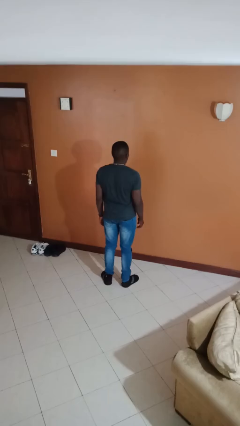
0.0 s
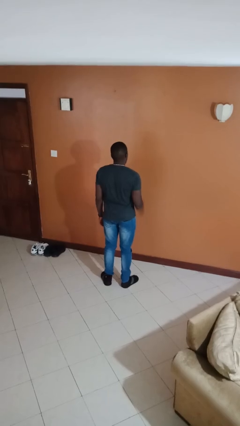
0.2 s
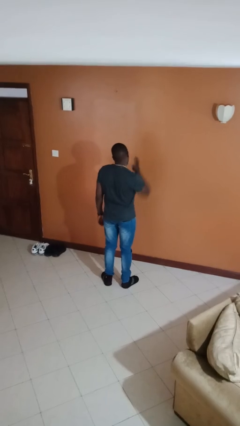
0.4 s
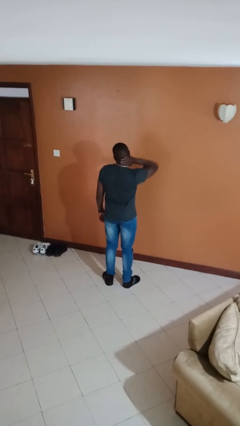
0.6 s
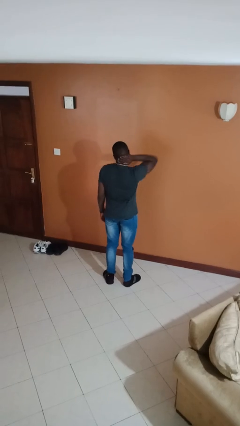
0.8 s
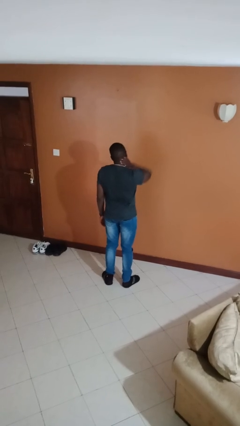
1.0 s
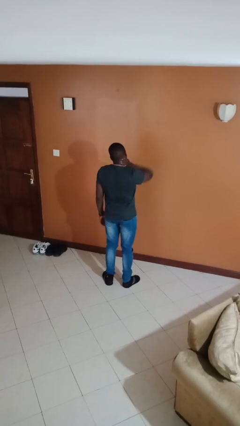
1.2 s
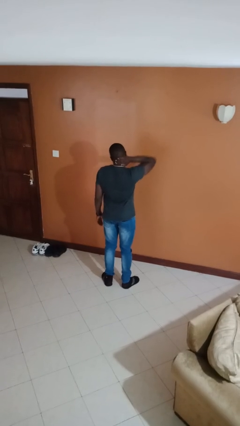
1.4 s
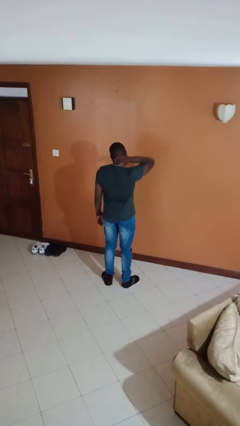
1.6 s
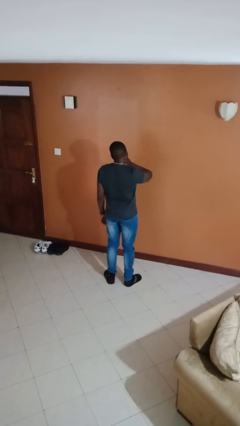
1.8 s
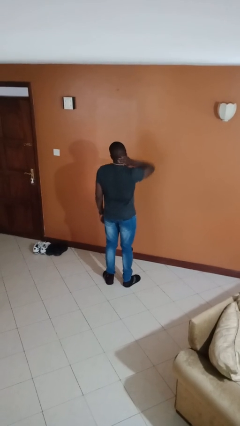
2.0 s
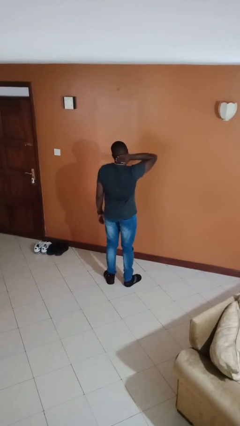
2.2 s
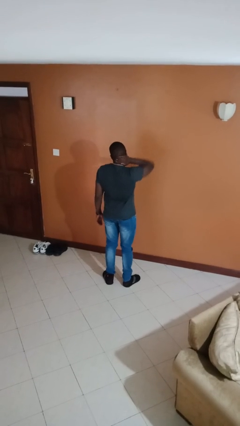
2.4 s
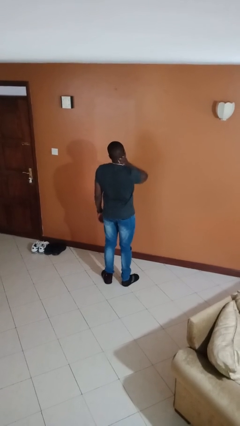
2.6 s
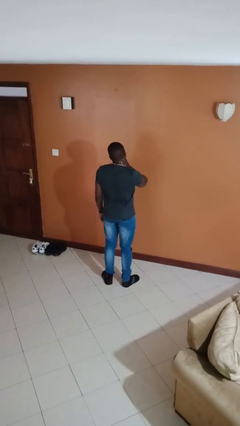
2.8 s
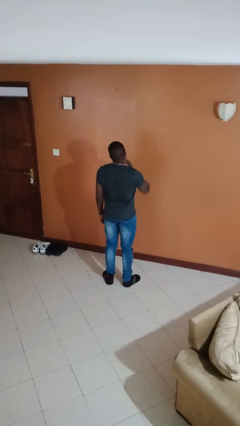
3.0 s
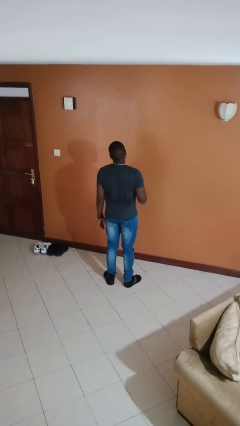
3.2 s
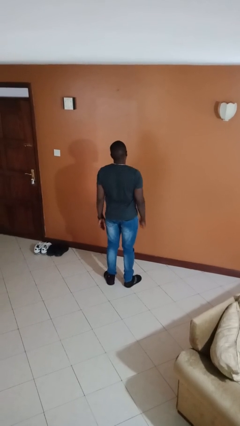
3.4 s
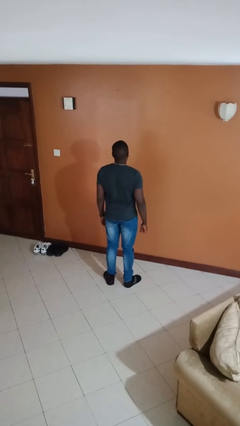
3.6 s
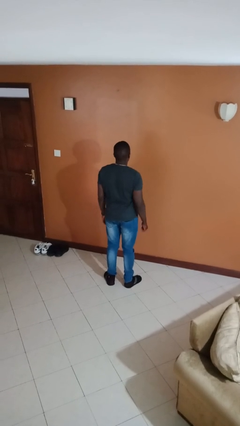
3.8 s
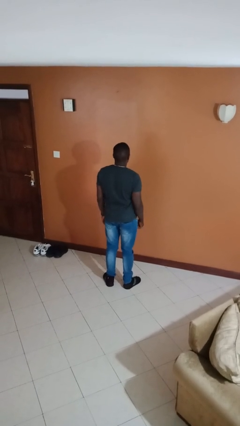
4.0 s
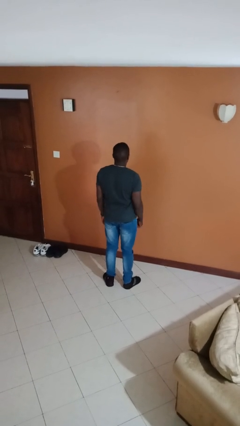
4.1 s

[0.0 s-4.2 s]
person rubs neck

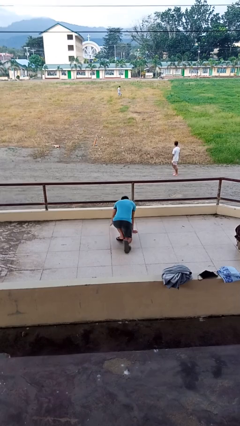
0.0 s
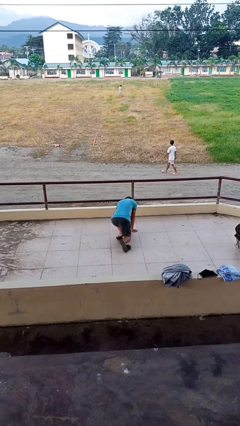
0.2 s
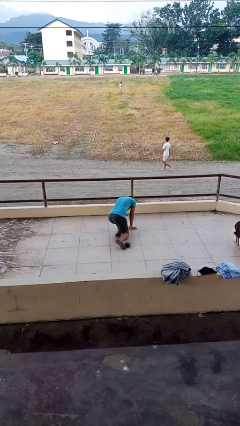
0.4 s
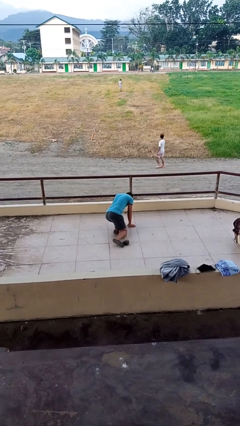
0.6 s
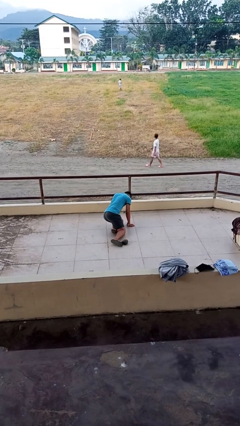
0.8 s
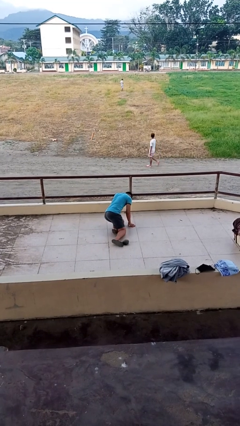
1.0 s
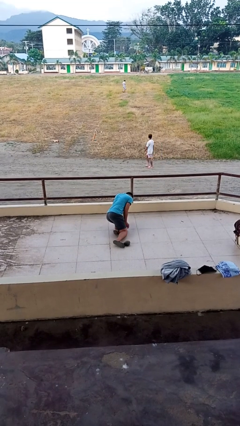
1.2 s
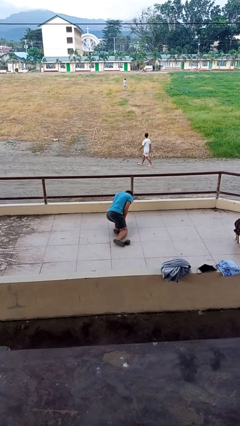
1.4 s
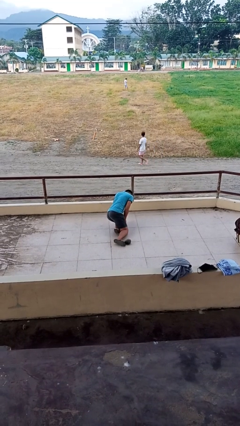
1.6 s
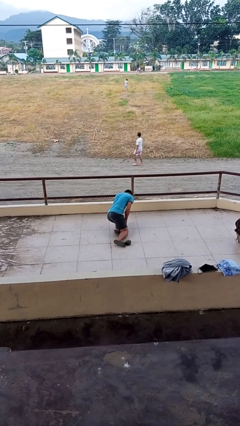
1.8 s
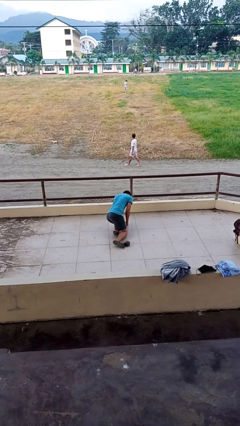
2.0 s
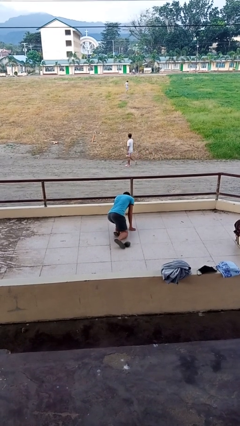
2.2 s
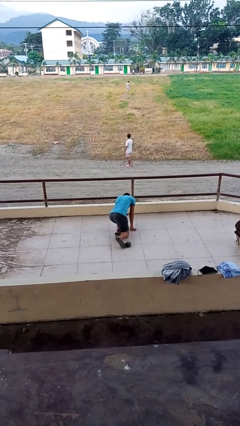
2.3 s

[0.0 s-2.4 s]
person lies down on floor

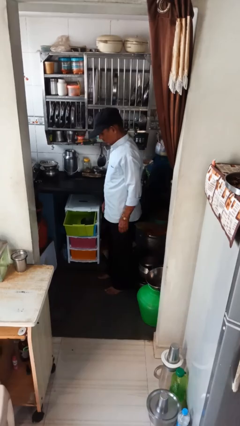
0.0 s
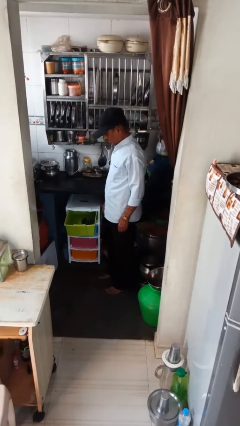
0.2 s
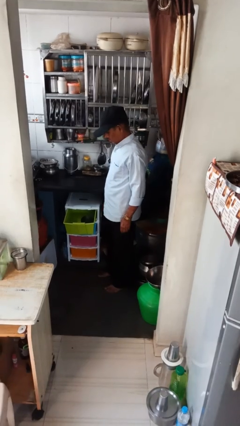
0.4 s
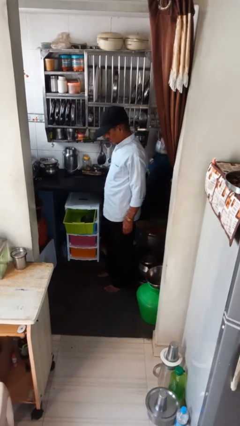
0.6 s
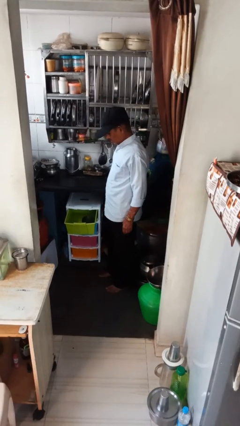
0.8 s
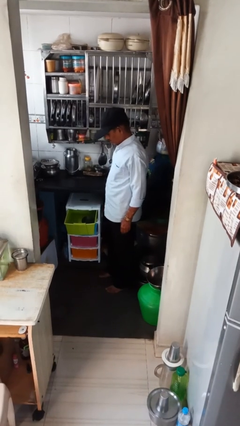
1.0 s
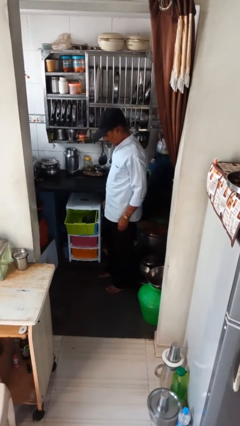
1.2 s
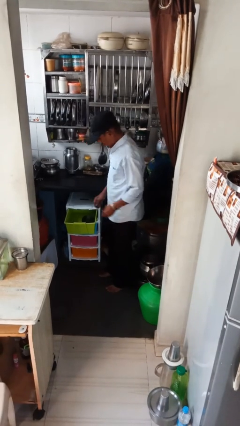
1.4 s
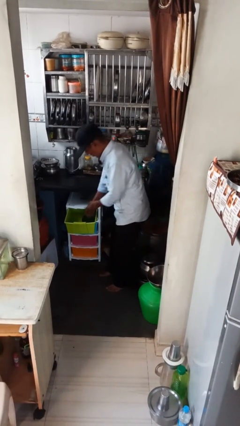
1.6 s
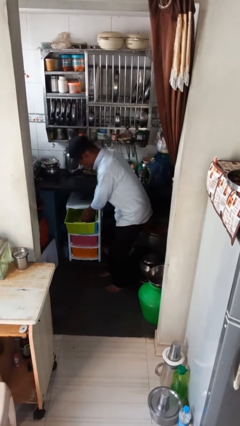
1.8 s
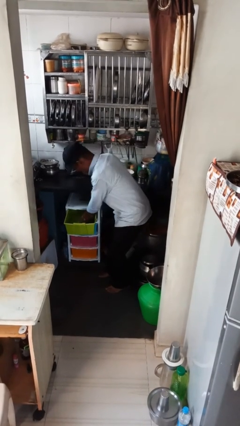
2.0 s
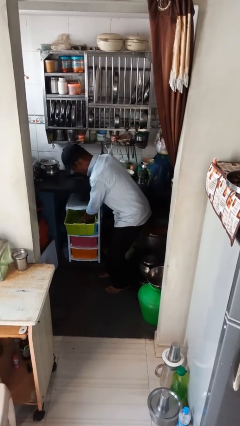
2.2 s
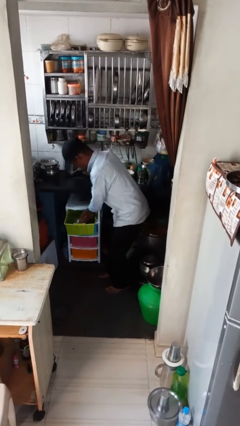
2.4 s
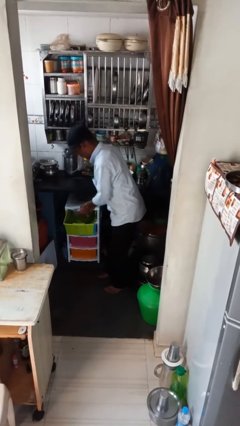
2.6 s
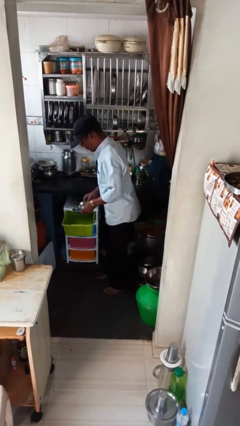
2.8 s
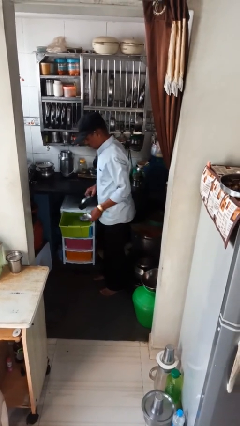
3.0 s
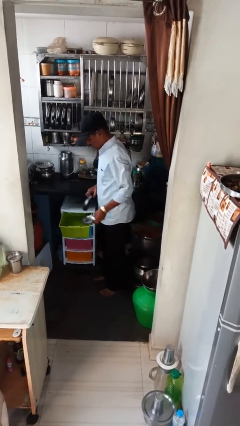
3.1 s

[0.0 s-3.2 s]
person takes object from cabinet

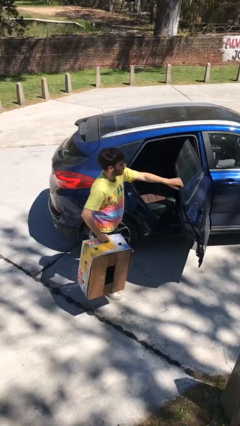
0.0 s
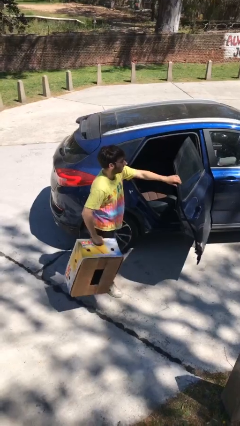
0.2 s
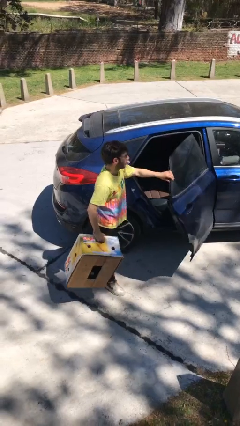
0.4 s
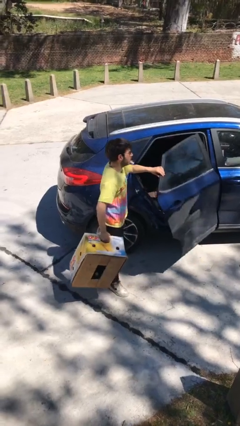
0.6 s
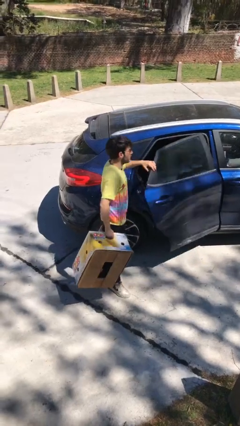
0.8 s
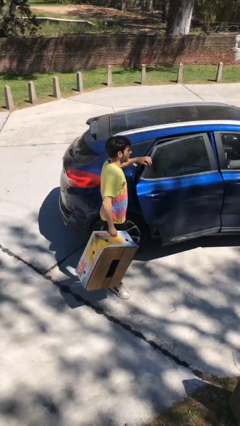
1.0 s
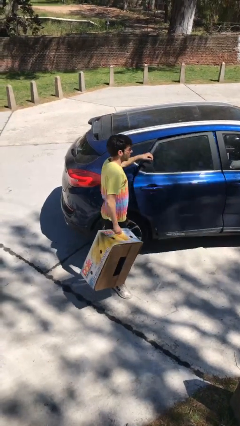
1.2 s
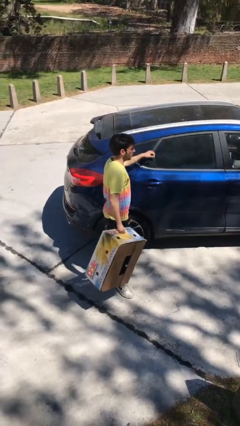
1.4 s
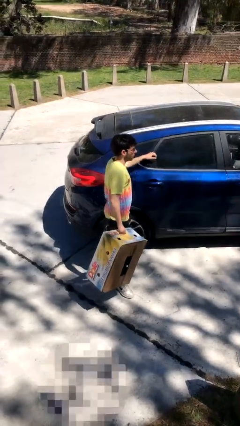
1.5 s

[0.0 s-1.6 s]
person closes car door

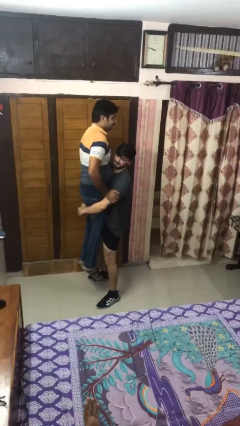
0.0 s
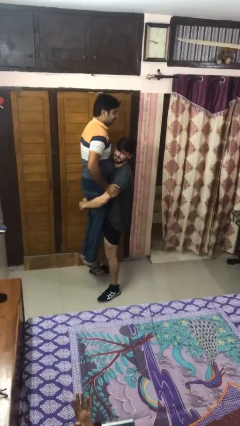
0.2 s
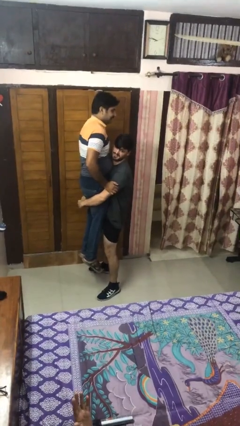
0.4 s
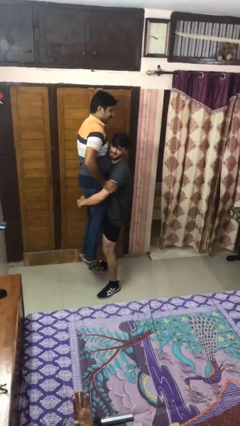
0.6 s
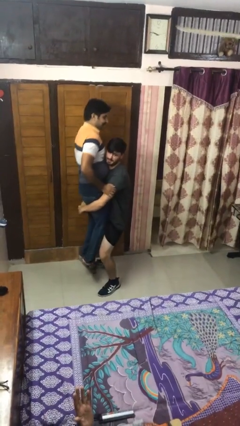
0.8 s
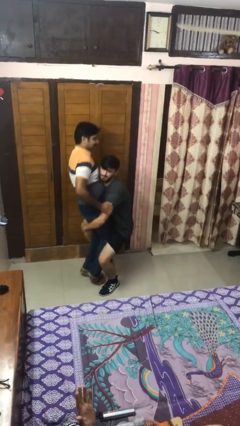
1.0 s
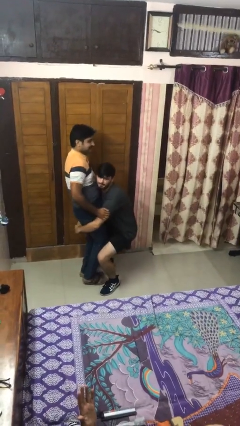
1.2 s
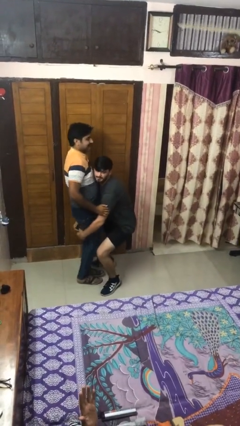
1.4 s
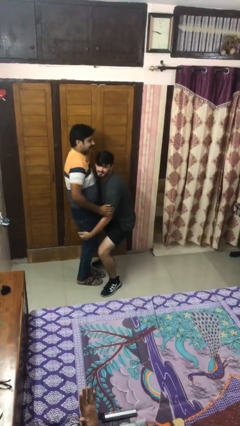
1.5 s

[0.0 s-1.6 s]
person puts down person

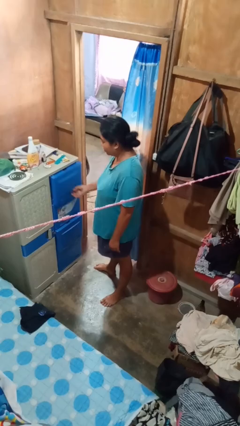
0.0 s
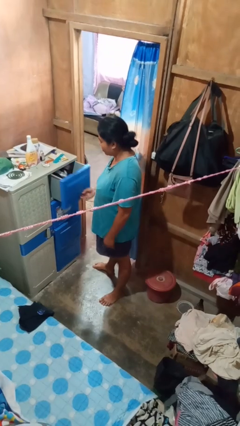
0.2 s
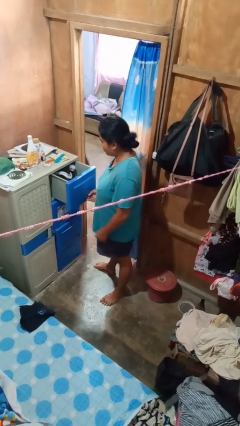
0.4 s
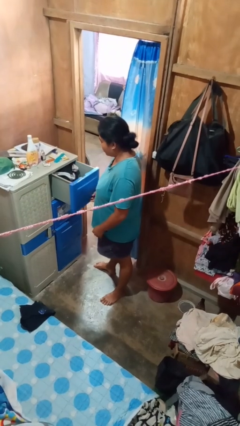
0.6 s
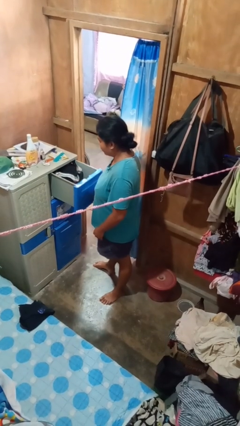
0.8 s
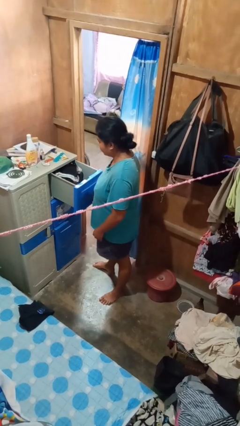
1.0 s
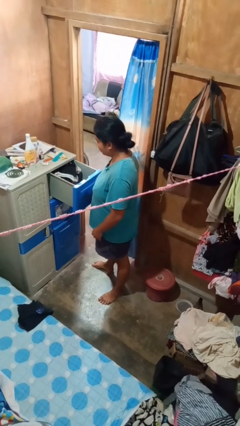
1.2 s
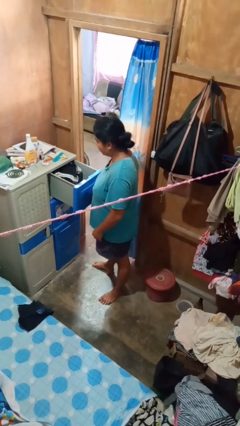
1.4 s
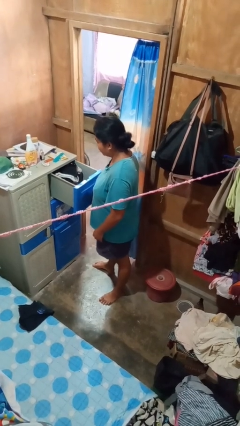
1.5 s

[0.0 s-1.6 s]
person opens dresser drawer

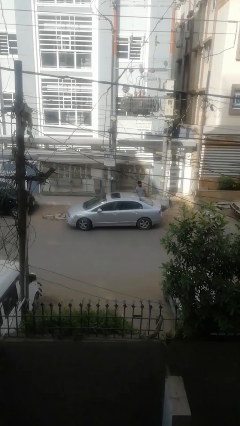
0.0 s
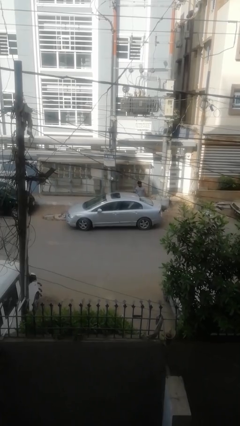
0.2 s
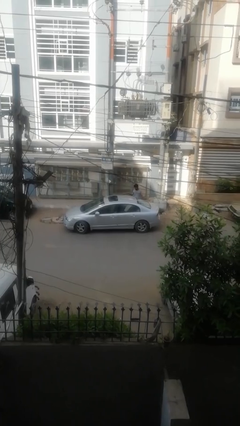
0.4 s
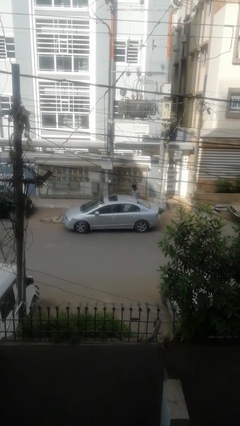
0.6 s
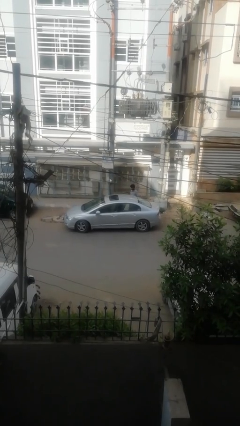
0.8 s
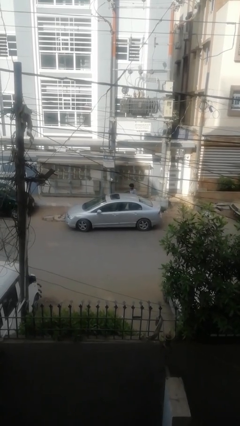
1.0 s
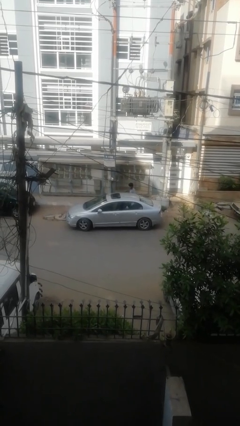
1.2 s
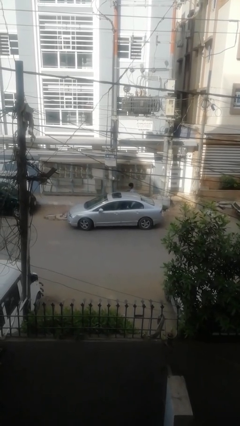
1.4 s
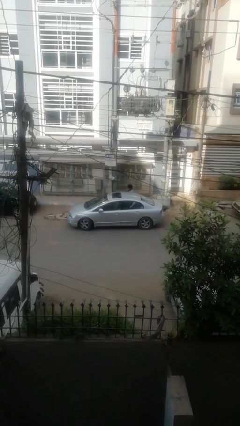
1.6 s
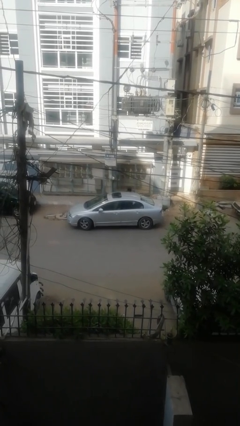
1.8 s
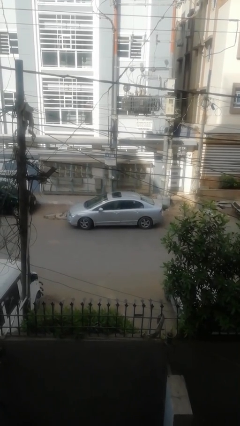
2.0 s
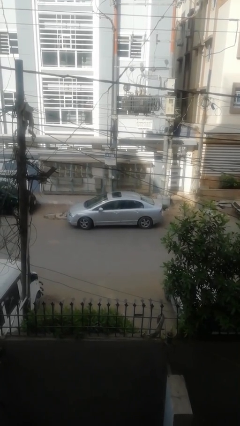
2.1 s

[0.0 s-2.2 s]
car picks up person

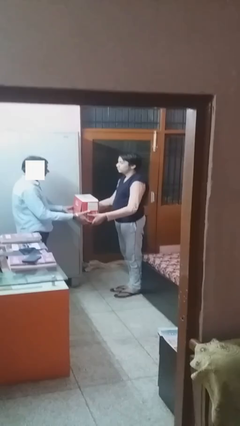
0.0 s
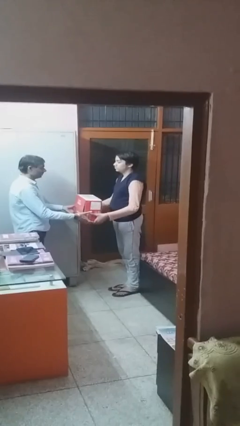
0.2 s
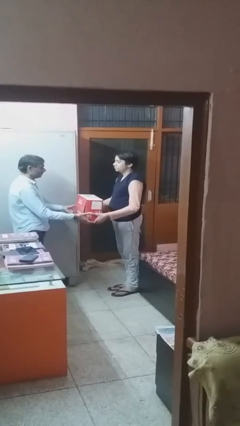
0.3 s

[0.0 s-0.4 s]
person transfers object to person
